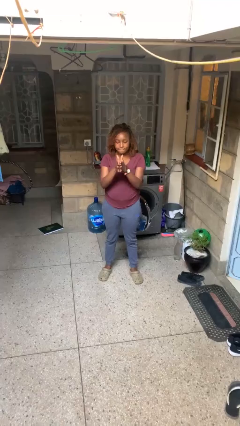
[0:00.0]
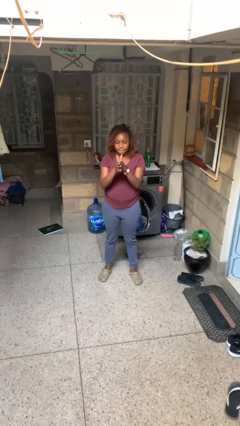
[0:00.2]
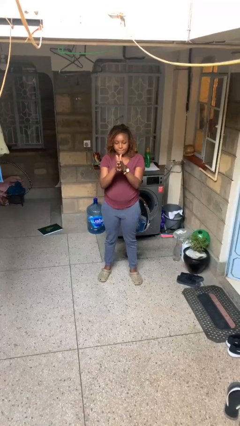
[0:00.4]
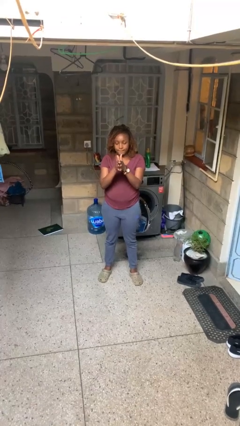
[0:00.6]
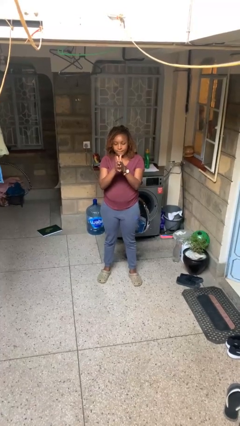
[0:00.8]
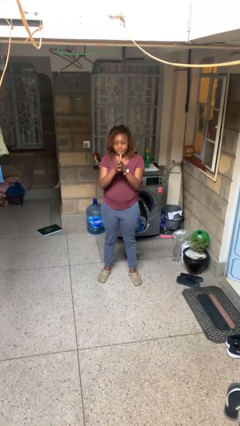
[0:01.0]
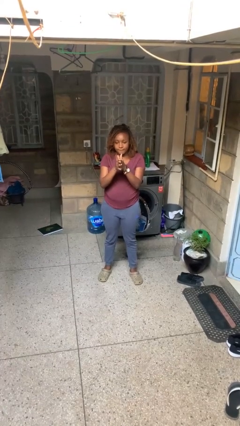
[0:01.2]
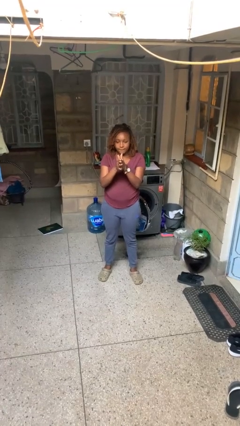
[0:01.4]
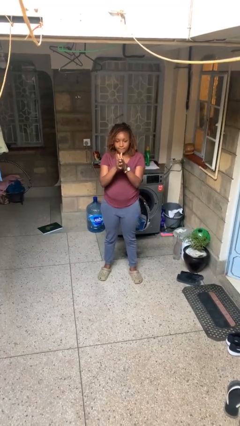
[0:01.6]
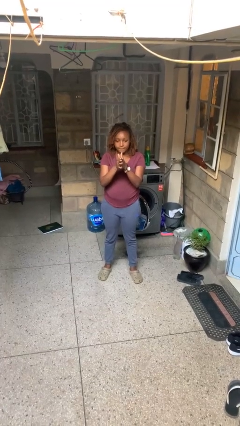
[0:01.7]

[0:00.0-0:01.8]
person gestures zoom in

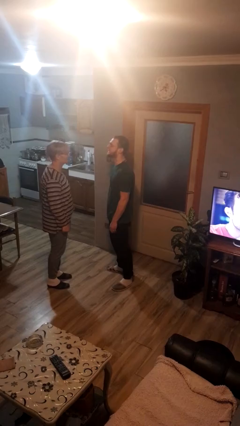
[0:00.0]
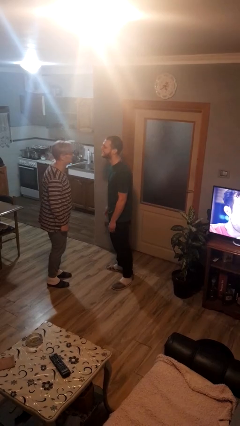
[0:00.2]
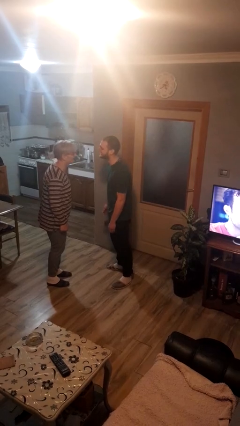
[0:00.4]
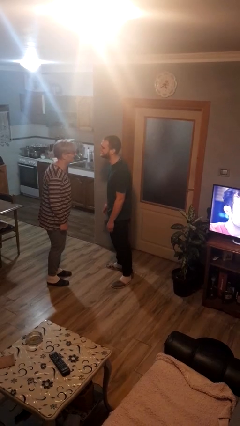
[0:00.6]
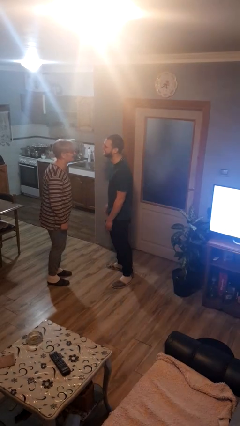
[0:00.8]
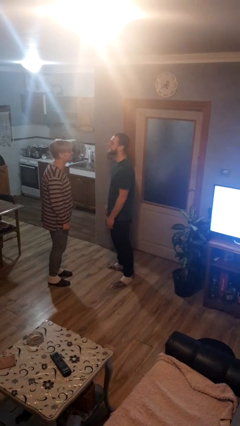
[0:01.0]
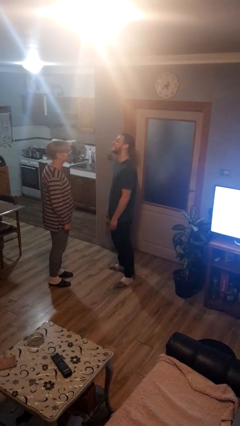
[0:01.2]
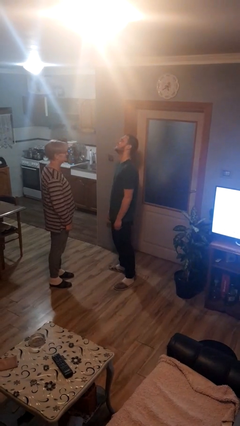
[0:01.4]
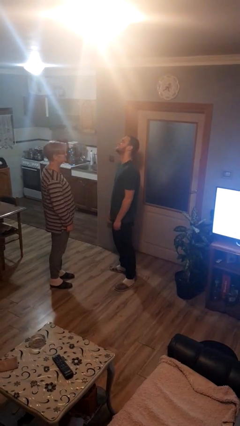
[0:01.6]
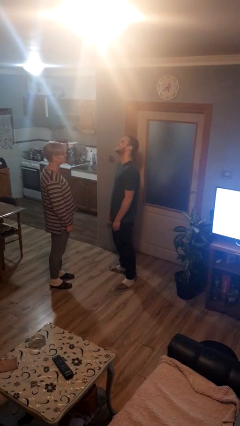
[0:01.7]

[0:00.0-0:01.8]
person laughs with person

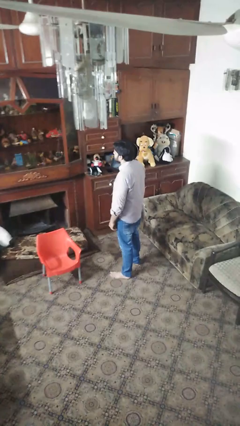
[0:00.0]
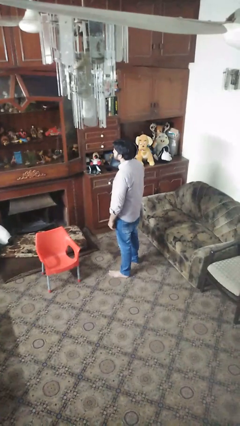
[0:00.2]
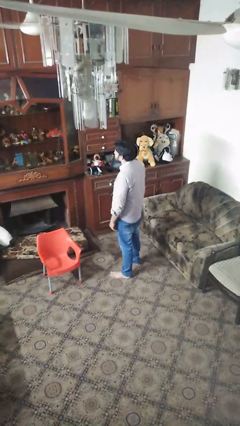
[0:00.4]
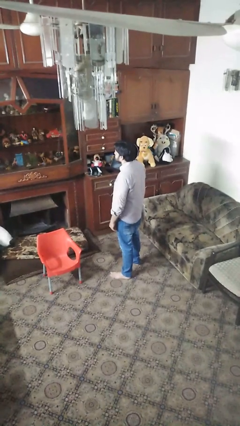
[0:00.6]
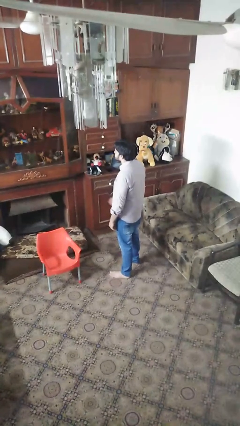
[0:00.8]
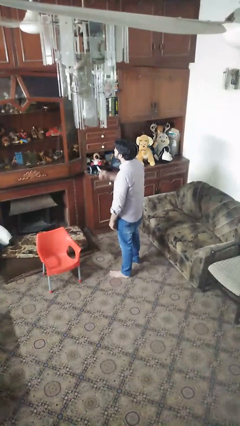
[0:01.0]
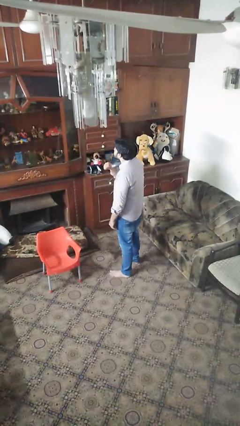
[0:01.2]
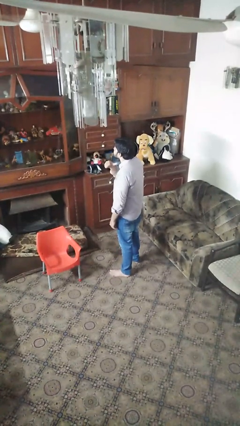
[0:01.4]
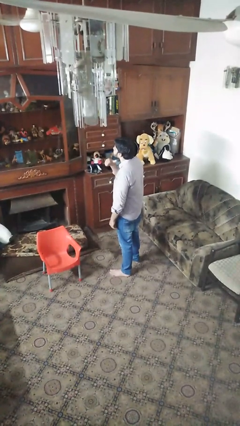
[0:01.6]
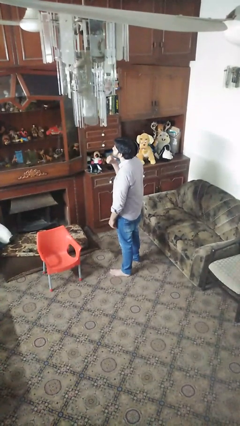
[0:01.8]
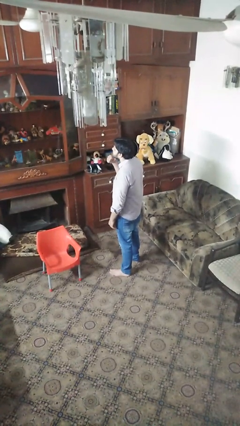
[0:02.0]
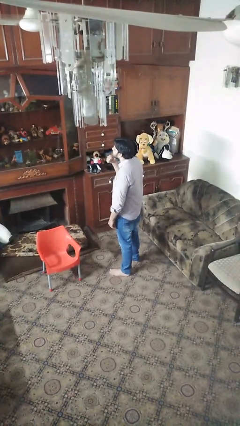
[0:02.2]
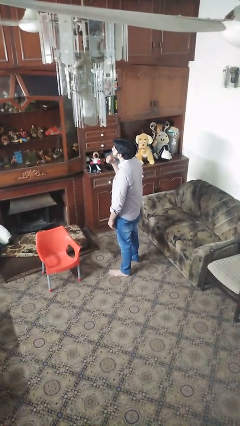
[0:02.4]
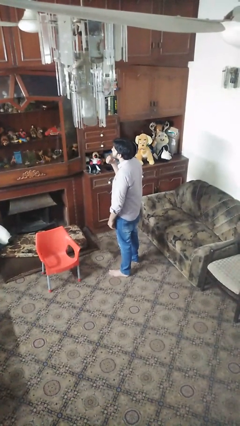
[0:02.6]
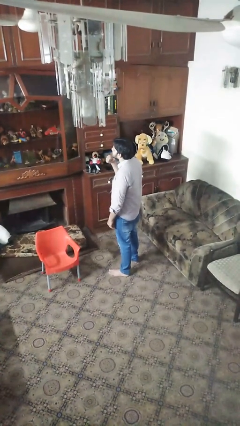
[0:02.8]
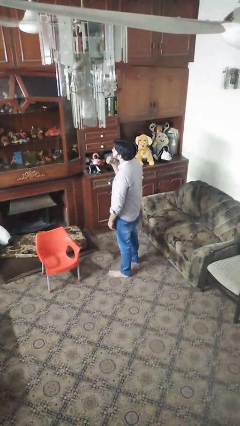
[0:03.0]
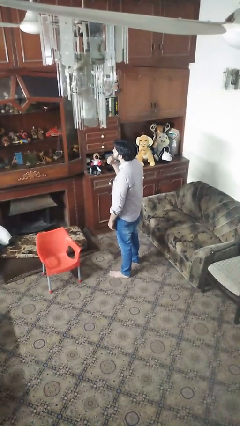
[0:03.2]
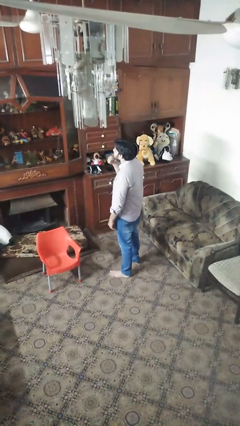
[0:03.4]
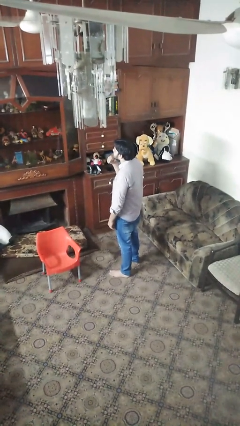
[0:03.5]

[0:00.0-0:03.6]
person gestures cut

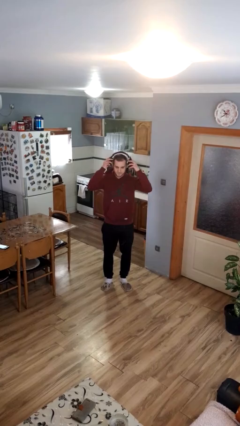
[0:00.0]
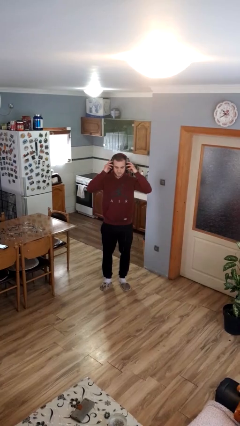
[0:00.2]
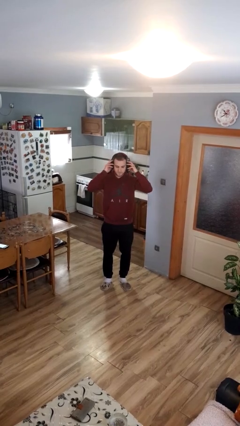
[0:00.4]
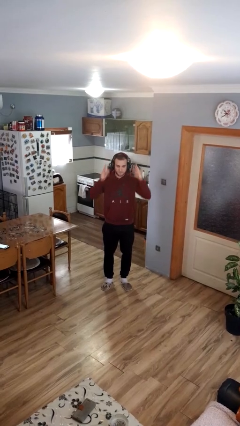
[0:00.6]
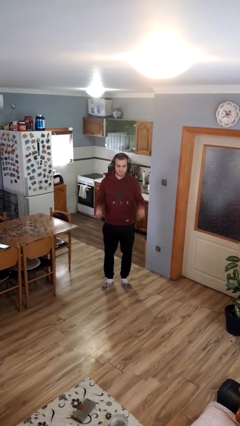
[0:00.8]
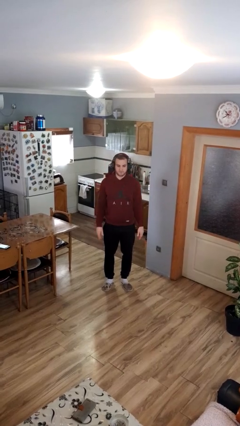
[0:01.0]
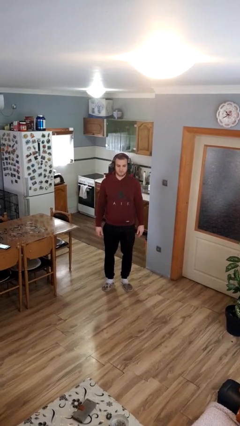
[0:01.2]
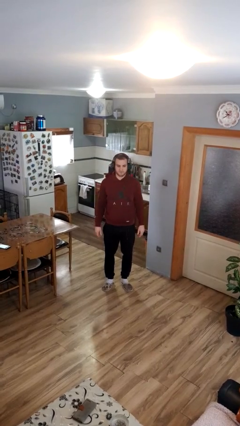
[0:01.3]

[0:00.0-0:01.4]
person puts on headphones

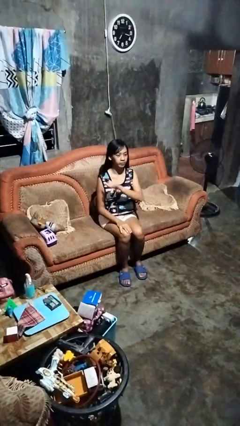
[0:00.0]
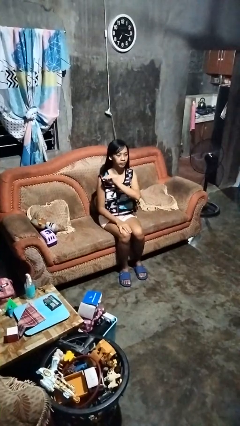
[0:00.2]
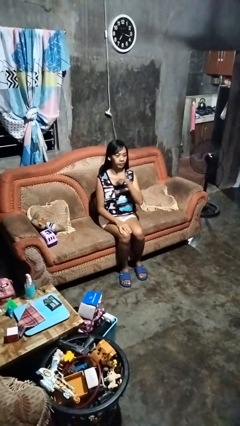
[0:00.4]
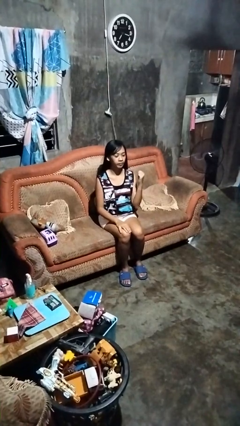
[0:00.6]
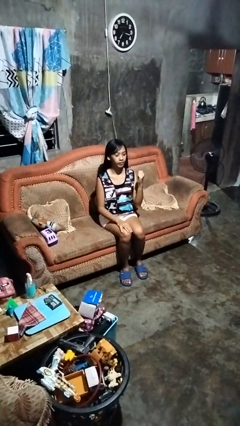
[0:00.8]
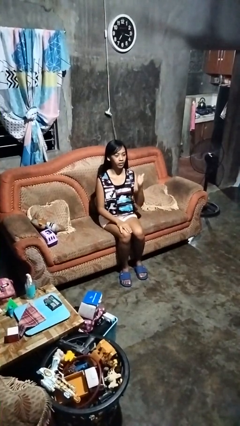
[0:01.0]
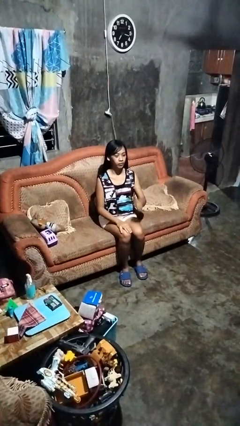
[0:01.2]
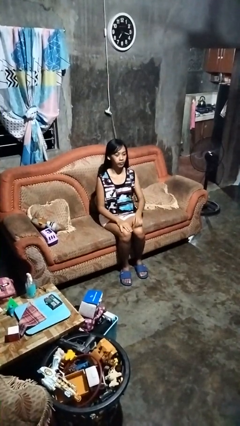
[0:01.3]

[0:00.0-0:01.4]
person pats head

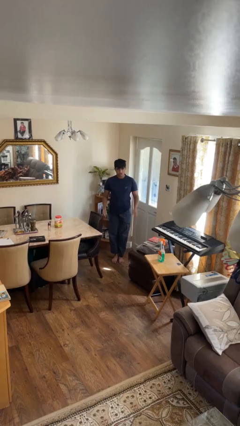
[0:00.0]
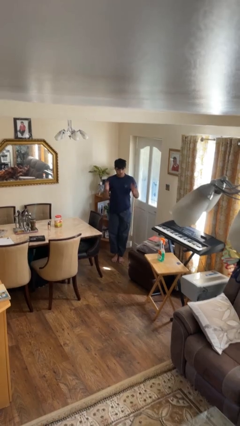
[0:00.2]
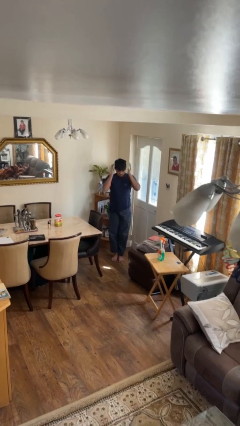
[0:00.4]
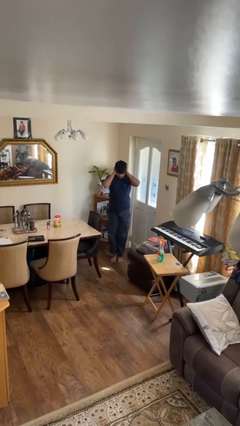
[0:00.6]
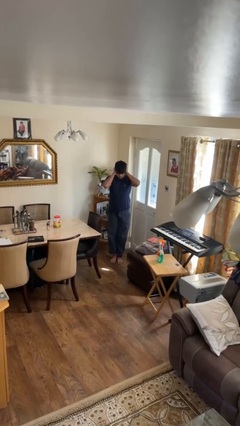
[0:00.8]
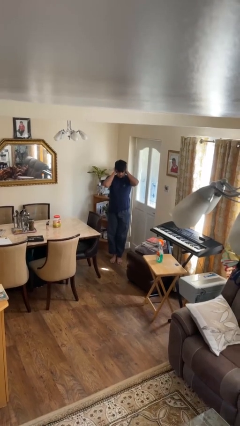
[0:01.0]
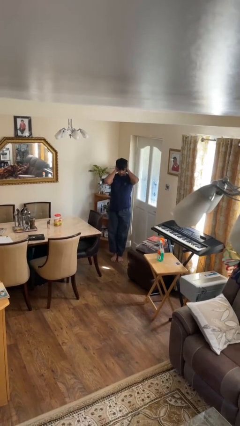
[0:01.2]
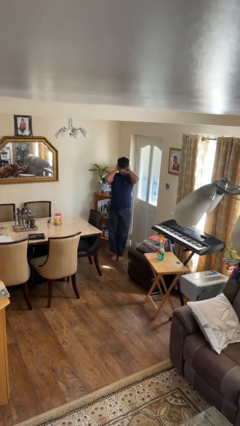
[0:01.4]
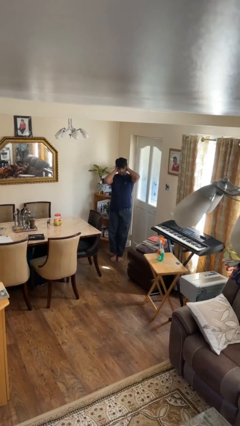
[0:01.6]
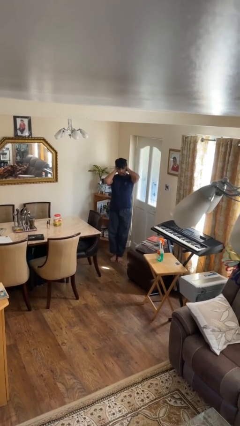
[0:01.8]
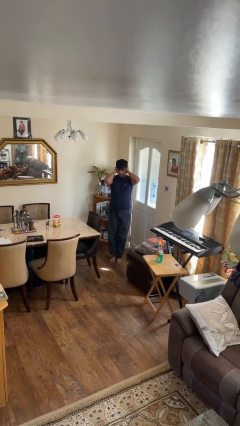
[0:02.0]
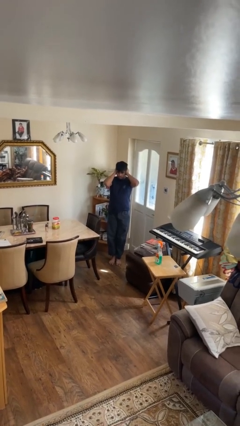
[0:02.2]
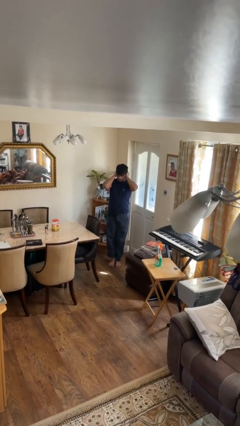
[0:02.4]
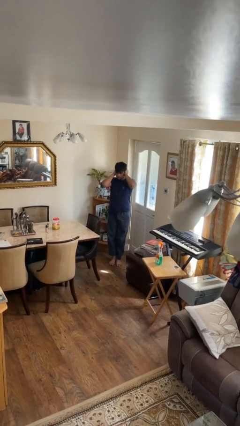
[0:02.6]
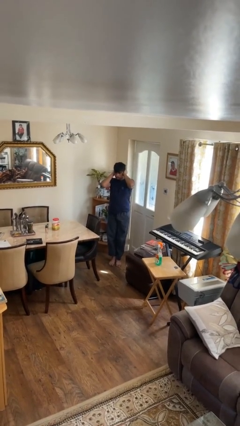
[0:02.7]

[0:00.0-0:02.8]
person puts fingers in ear

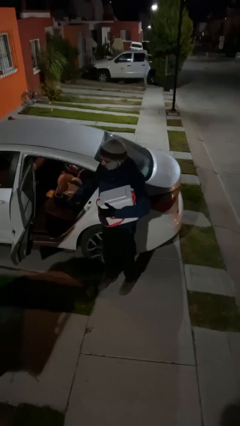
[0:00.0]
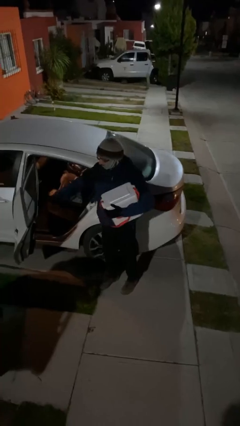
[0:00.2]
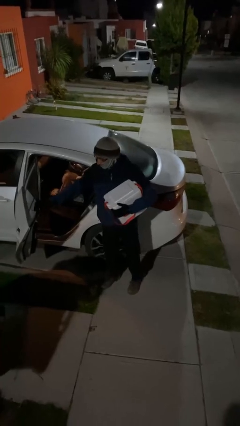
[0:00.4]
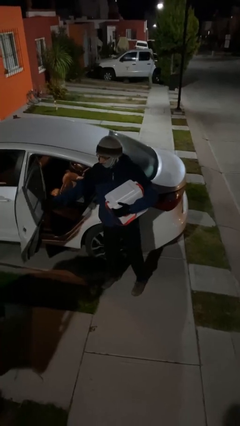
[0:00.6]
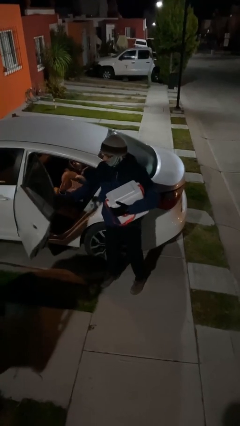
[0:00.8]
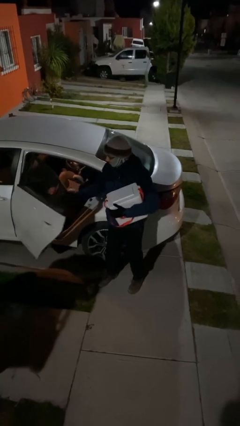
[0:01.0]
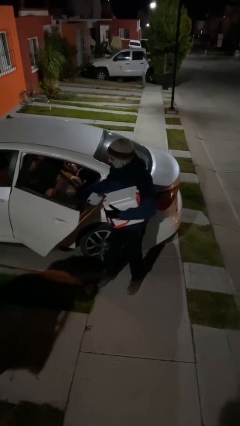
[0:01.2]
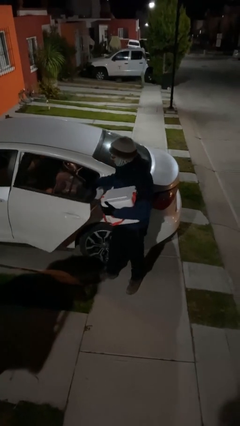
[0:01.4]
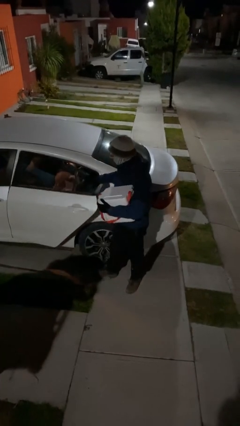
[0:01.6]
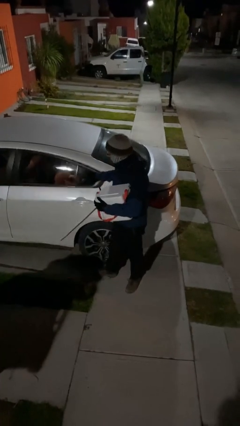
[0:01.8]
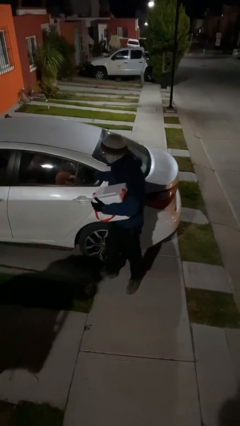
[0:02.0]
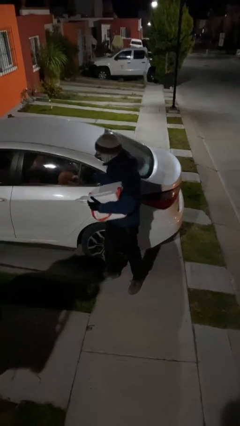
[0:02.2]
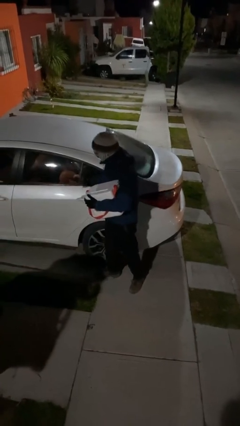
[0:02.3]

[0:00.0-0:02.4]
person closes car door

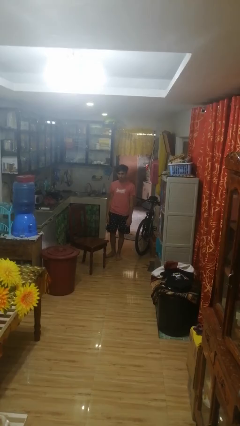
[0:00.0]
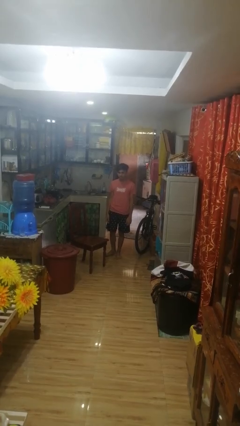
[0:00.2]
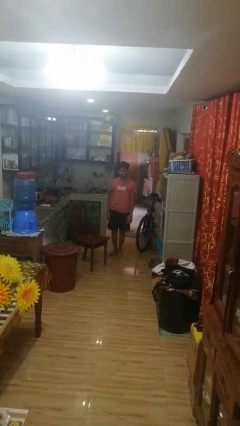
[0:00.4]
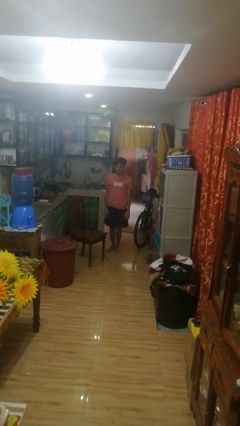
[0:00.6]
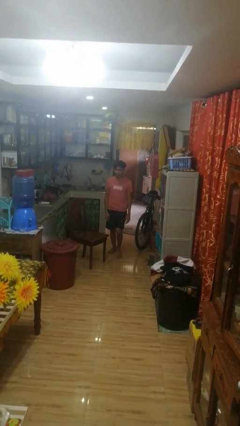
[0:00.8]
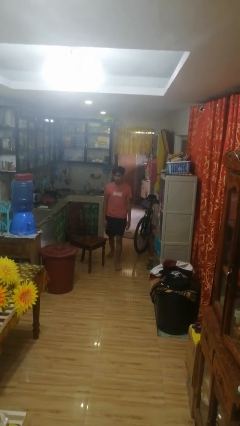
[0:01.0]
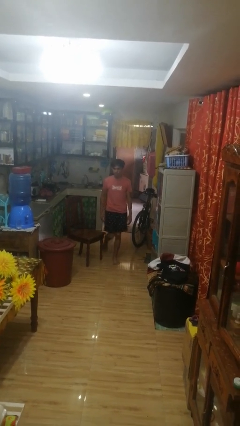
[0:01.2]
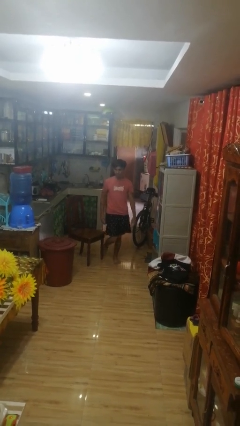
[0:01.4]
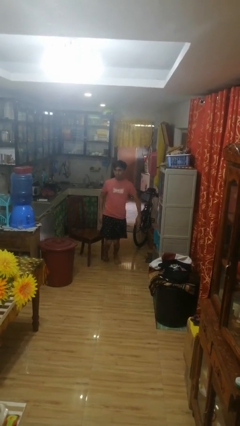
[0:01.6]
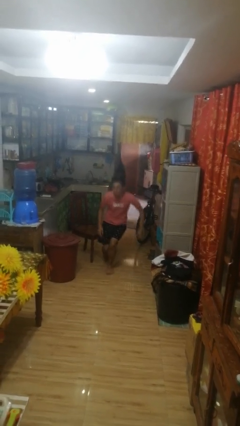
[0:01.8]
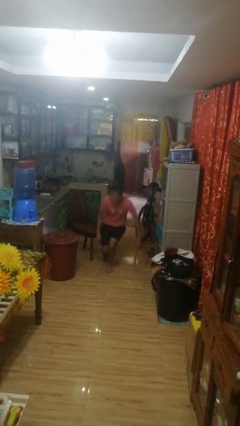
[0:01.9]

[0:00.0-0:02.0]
person trips on object on floor
